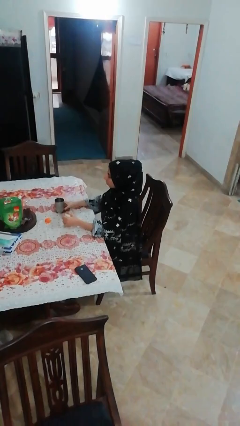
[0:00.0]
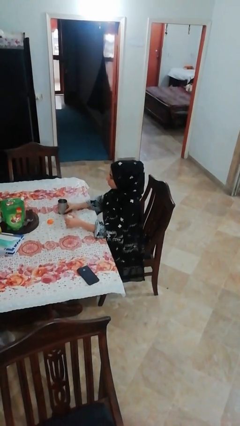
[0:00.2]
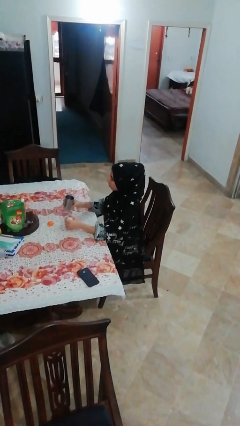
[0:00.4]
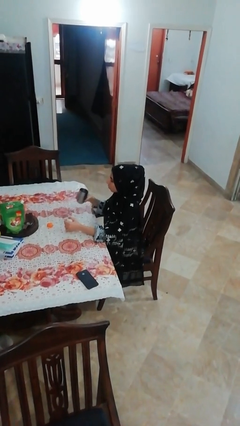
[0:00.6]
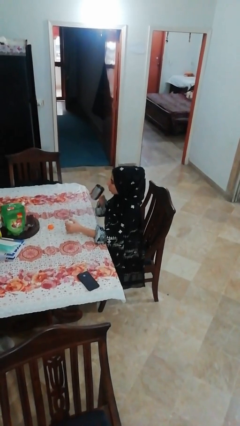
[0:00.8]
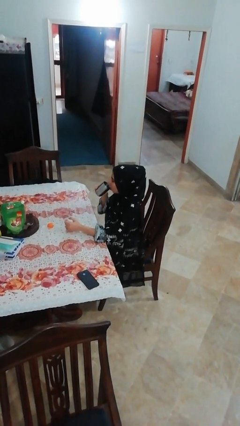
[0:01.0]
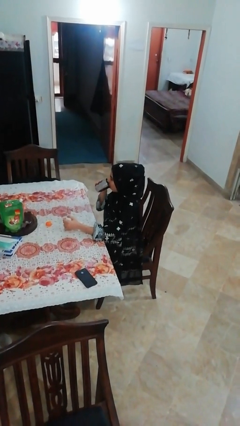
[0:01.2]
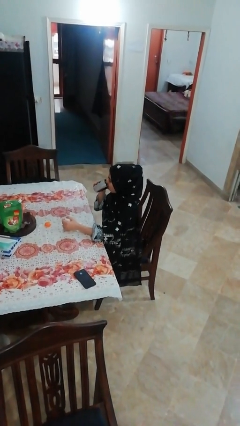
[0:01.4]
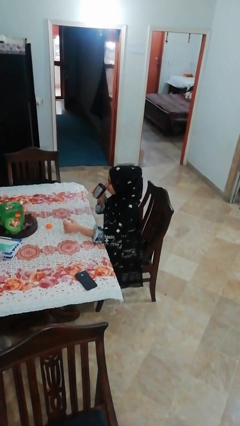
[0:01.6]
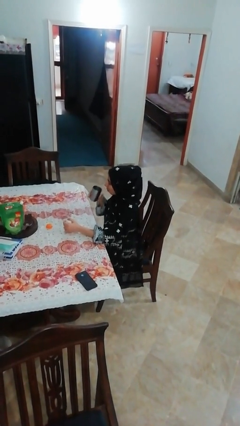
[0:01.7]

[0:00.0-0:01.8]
person drinks from cup

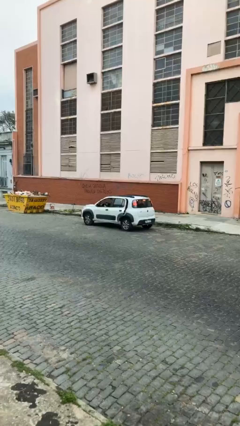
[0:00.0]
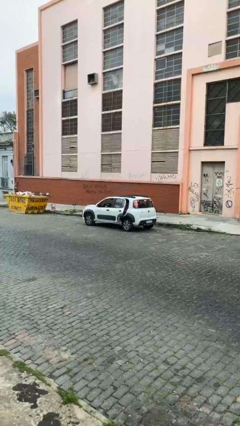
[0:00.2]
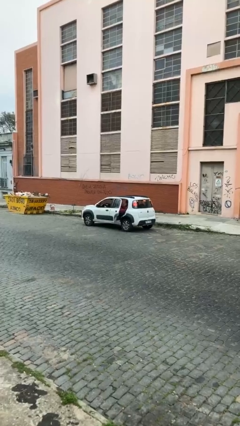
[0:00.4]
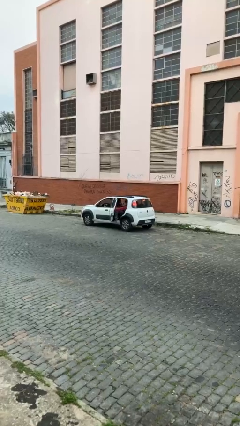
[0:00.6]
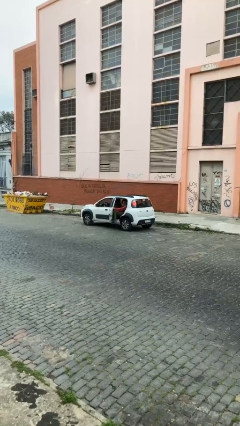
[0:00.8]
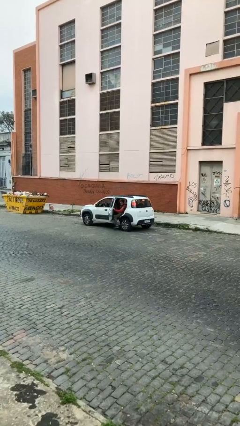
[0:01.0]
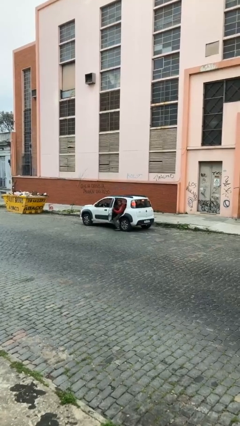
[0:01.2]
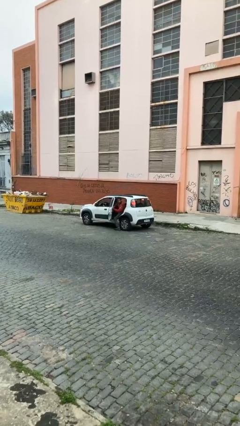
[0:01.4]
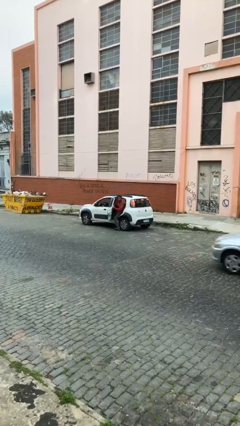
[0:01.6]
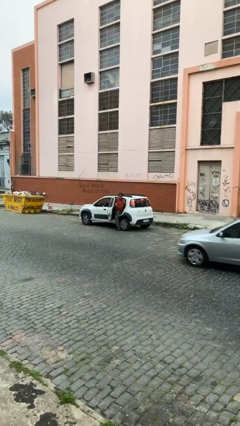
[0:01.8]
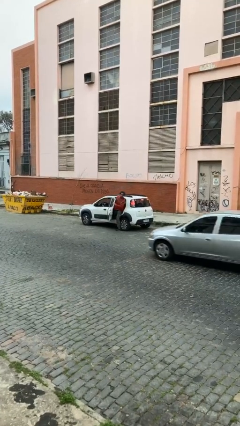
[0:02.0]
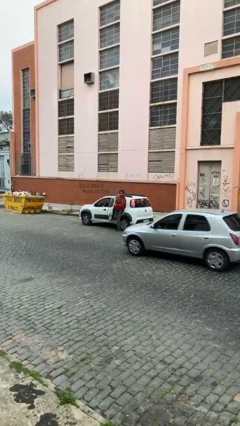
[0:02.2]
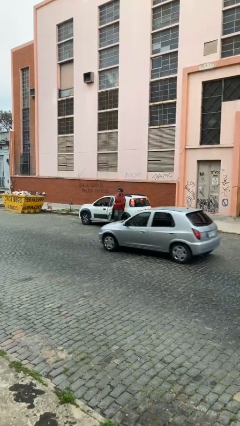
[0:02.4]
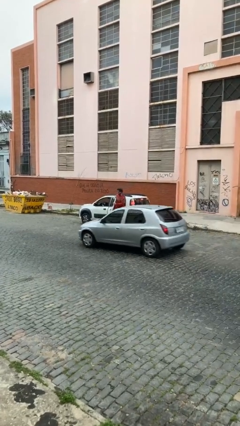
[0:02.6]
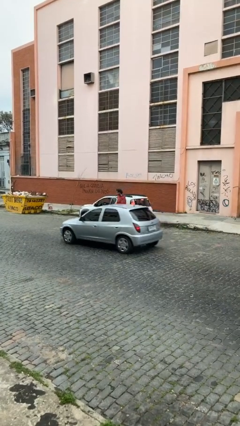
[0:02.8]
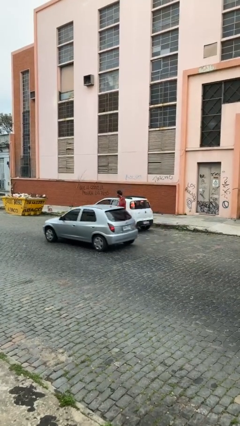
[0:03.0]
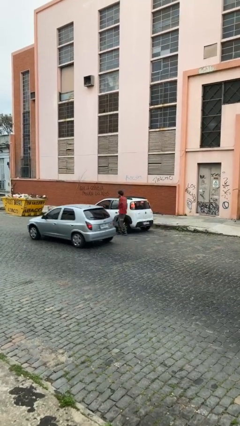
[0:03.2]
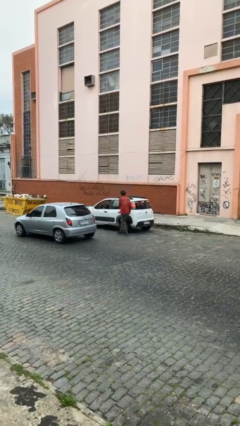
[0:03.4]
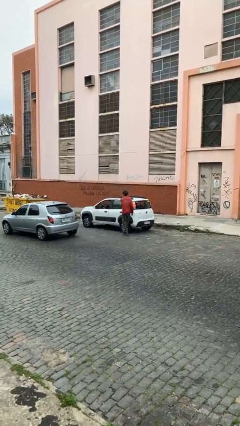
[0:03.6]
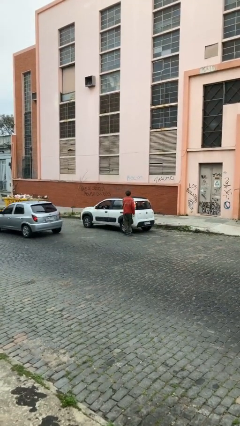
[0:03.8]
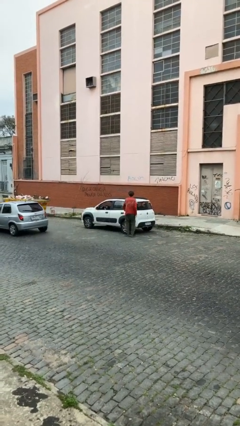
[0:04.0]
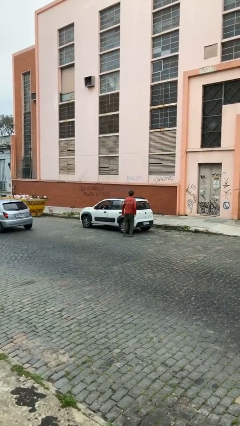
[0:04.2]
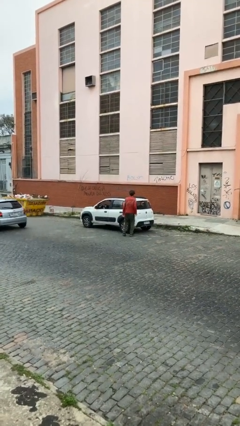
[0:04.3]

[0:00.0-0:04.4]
car drops off person

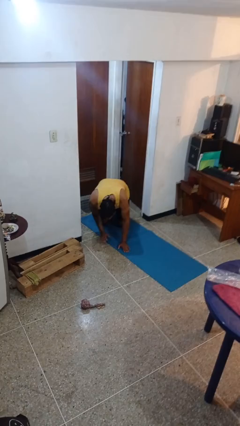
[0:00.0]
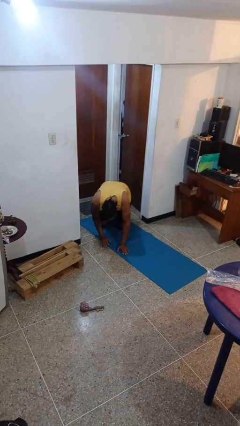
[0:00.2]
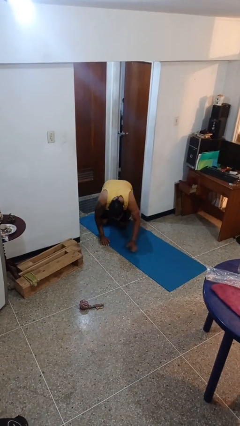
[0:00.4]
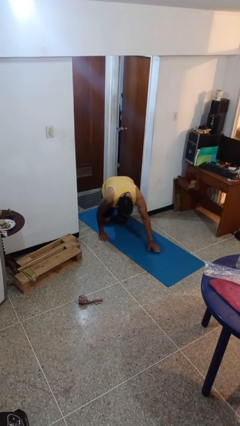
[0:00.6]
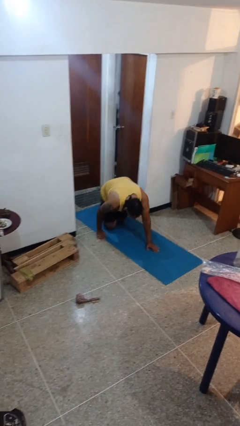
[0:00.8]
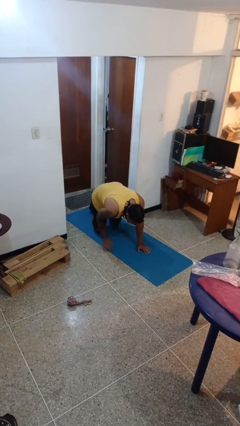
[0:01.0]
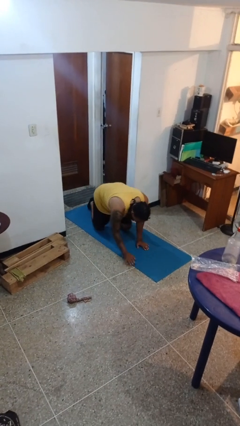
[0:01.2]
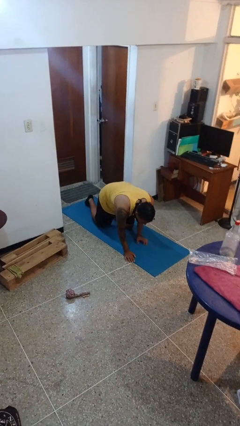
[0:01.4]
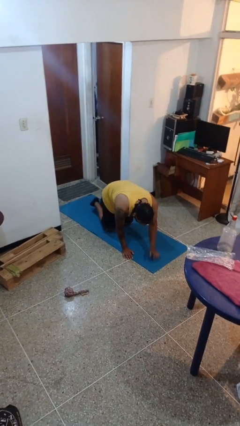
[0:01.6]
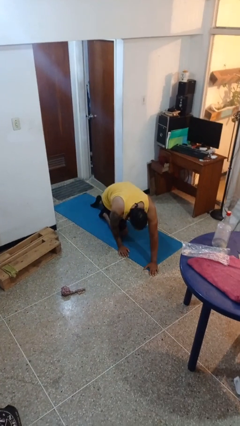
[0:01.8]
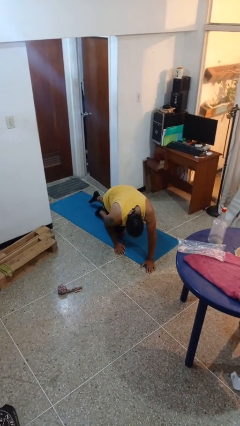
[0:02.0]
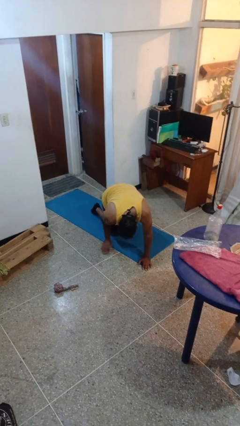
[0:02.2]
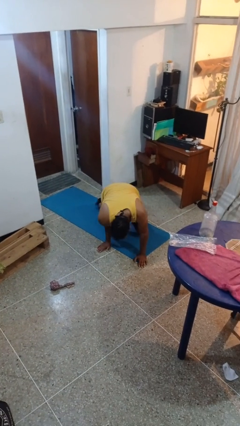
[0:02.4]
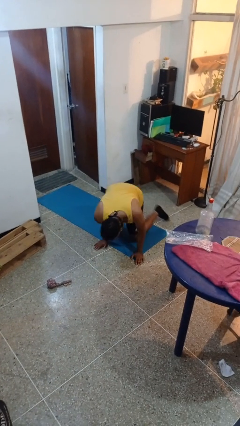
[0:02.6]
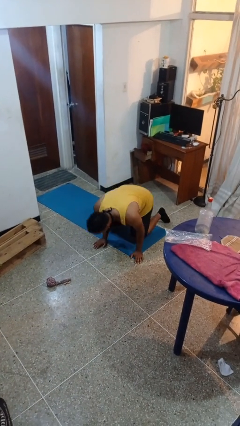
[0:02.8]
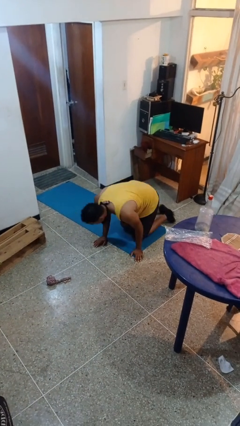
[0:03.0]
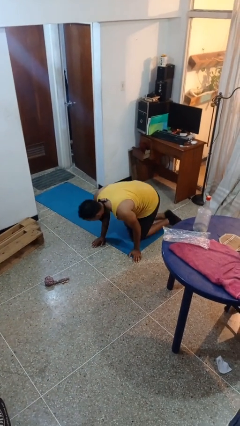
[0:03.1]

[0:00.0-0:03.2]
person crawls

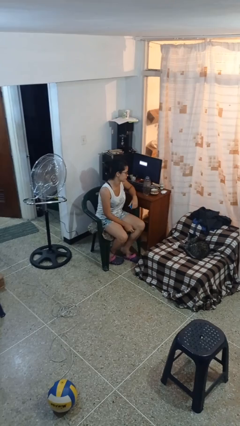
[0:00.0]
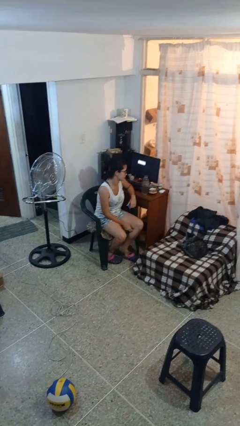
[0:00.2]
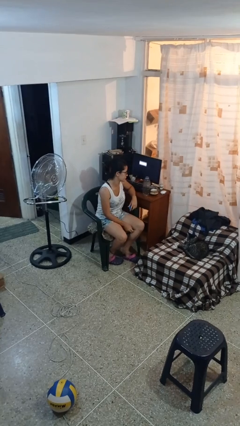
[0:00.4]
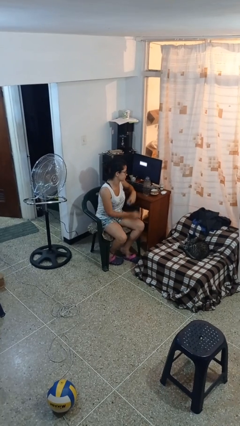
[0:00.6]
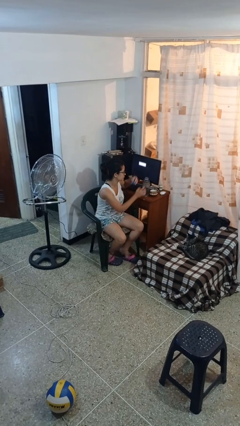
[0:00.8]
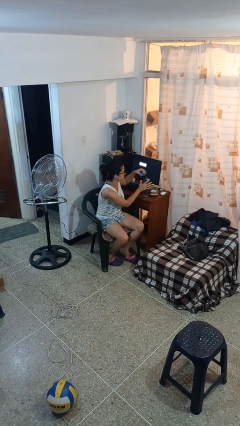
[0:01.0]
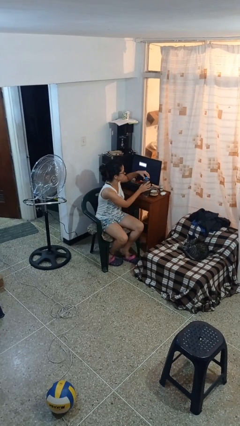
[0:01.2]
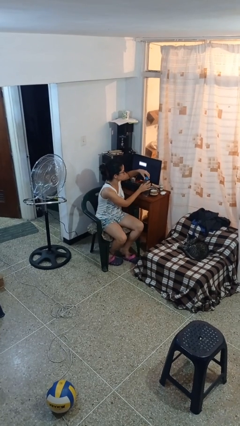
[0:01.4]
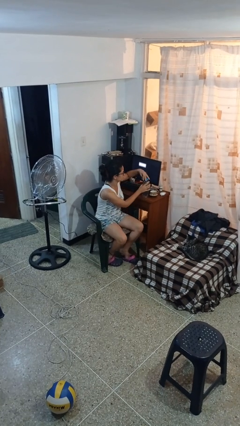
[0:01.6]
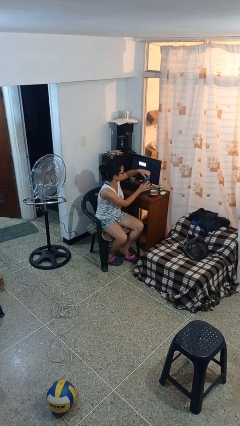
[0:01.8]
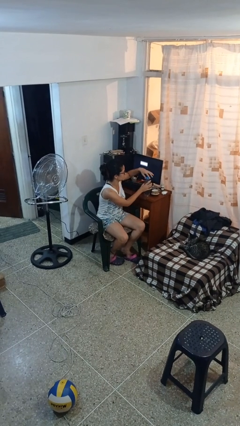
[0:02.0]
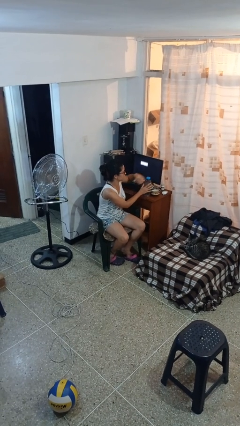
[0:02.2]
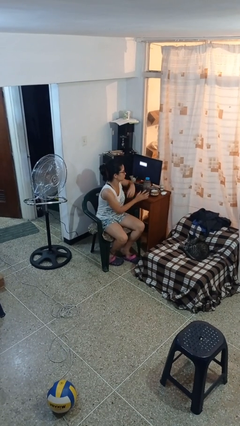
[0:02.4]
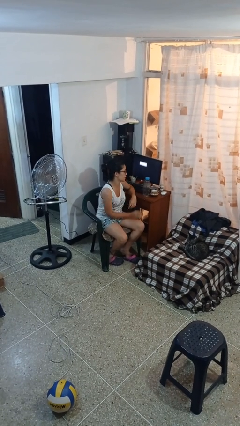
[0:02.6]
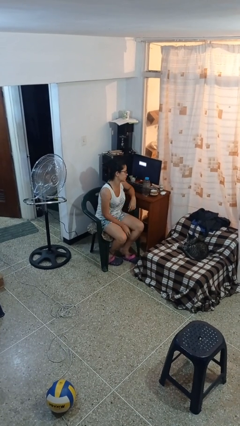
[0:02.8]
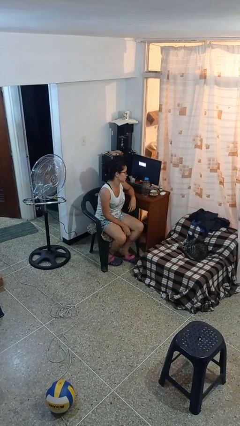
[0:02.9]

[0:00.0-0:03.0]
person screws lid to bottle

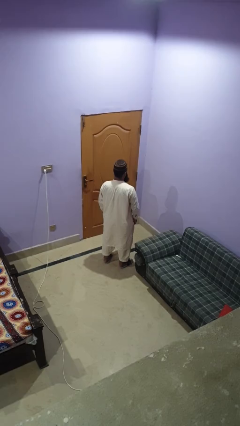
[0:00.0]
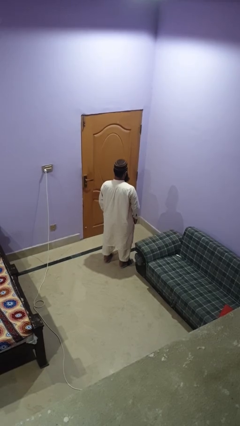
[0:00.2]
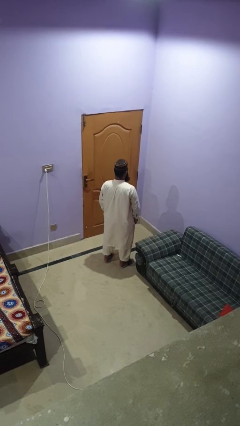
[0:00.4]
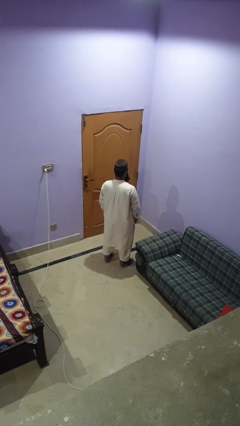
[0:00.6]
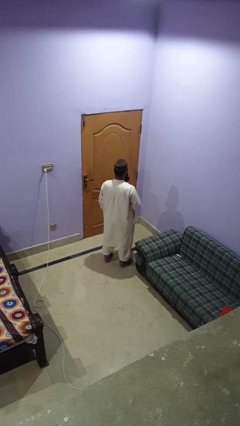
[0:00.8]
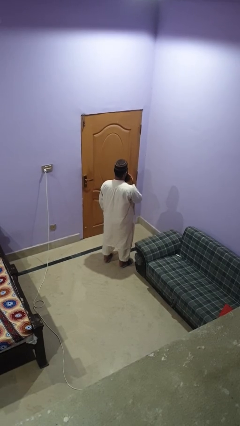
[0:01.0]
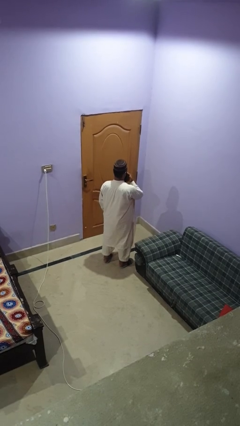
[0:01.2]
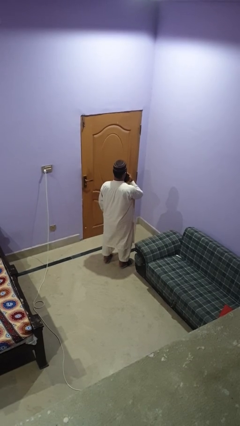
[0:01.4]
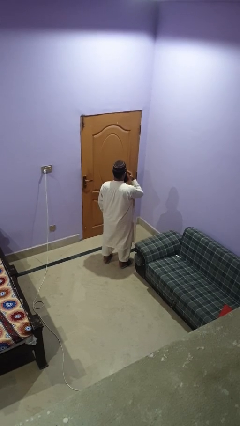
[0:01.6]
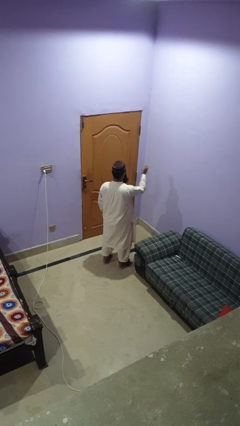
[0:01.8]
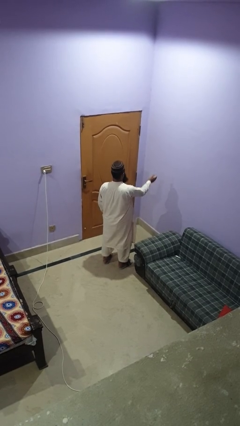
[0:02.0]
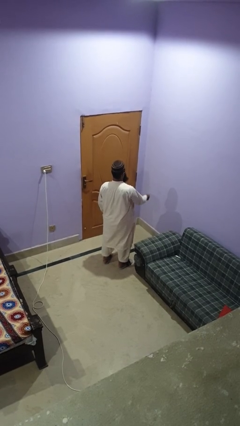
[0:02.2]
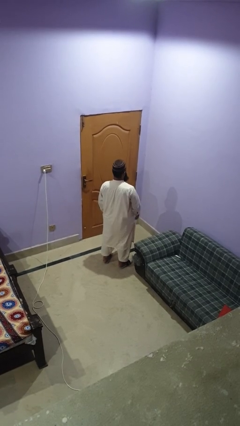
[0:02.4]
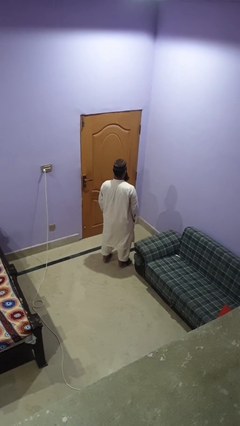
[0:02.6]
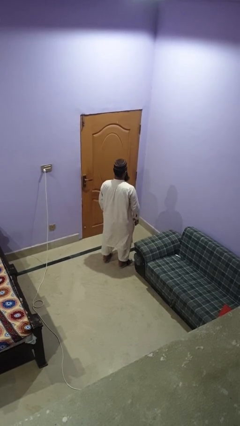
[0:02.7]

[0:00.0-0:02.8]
person gestures blow kiss

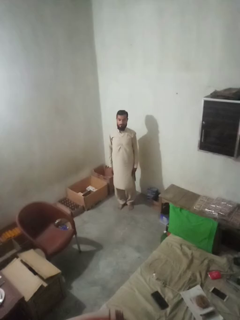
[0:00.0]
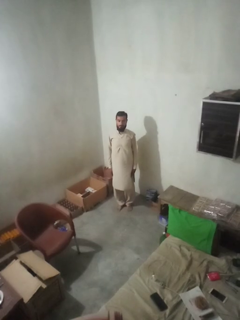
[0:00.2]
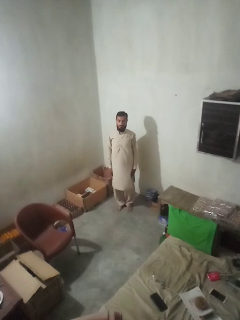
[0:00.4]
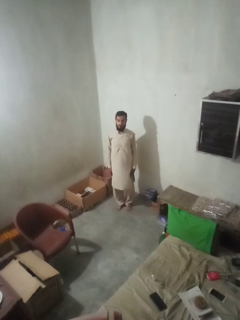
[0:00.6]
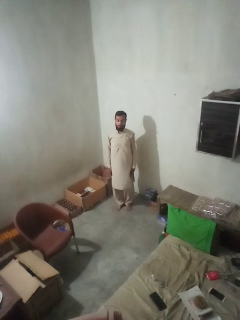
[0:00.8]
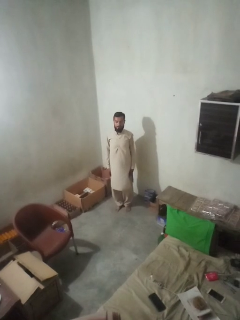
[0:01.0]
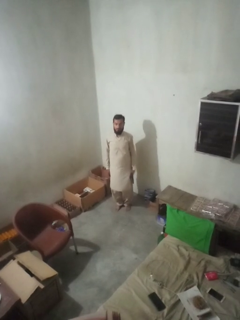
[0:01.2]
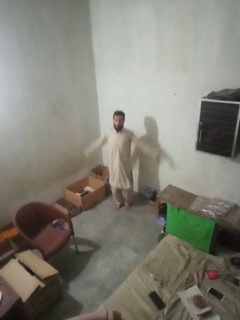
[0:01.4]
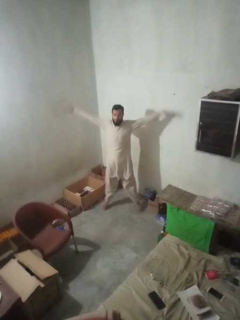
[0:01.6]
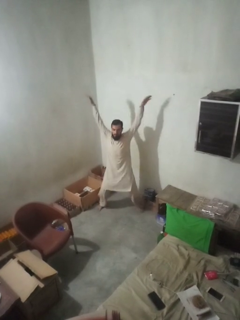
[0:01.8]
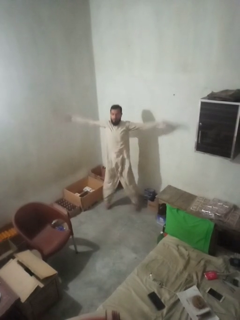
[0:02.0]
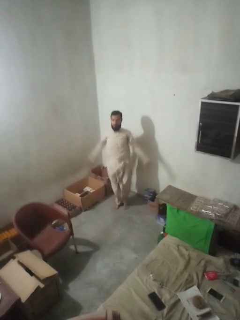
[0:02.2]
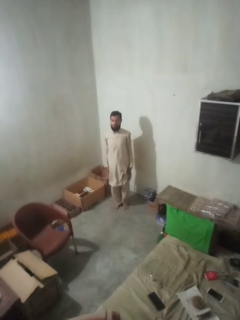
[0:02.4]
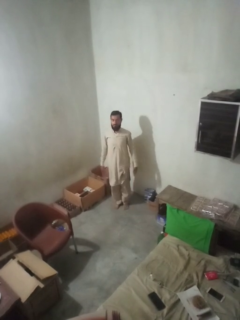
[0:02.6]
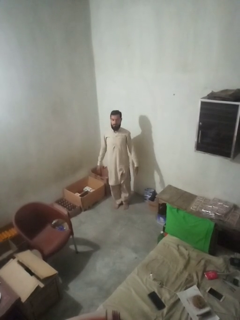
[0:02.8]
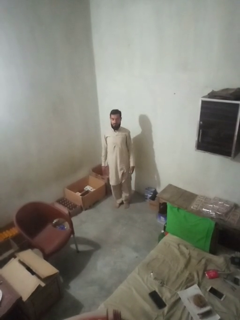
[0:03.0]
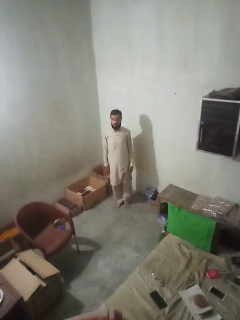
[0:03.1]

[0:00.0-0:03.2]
person exercises with jumping jacks
